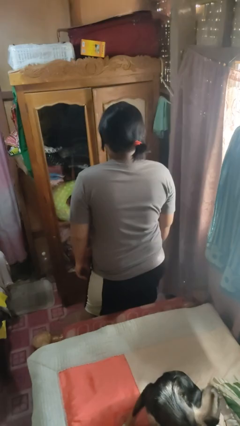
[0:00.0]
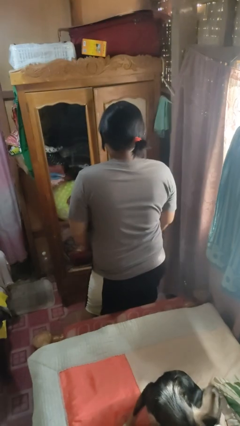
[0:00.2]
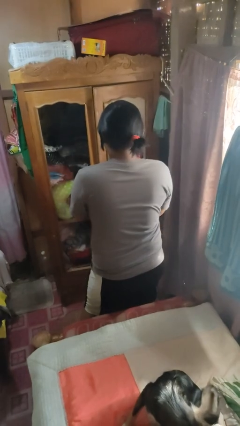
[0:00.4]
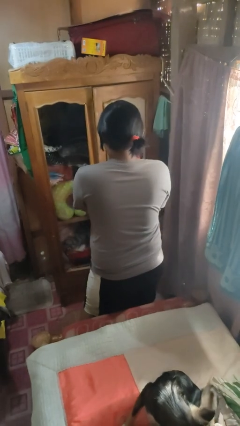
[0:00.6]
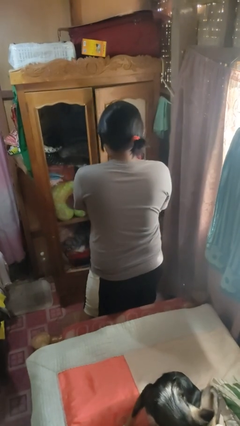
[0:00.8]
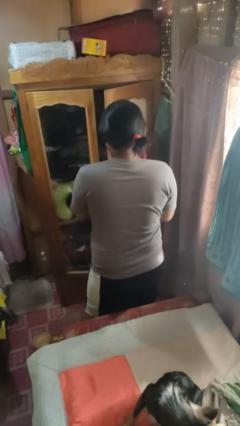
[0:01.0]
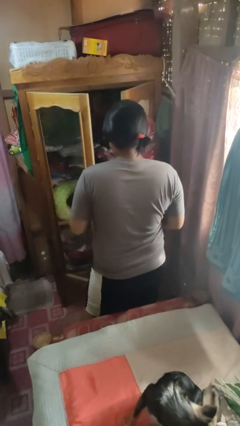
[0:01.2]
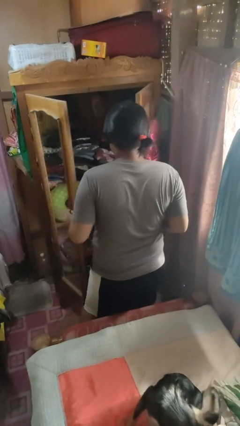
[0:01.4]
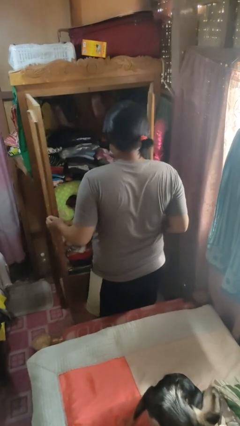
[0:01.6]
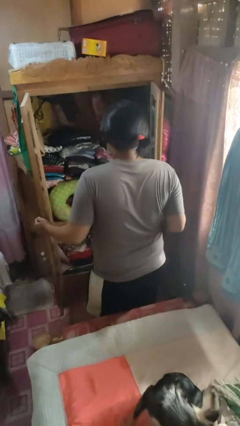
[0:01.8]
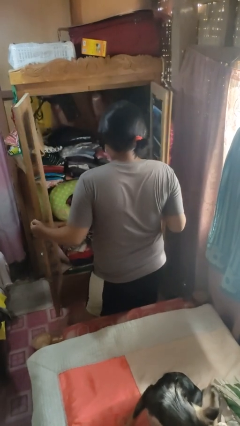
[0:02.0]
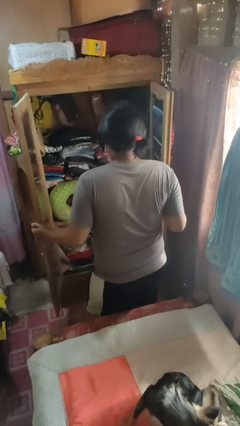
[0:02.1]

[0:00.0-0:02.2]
person opens closet door

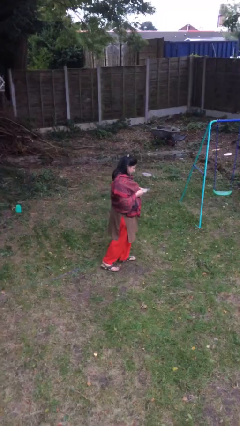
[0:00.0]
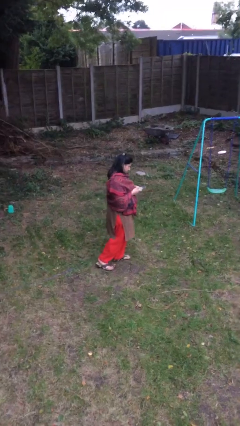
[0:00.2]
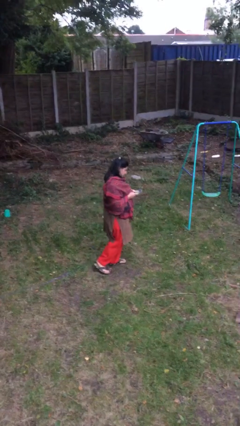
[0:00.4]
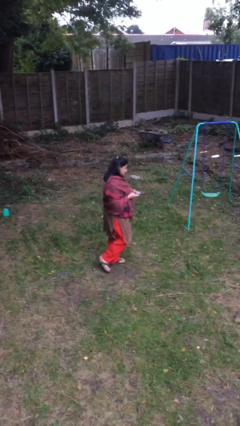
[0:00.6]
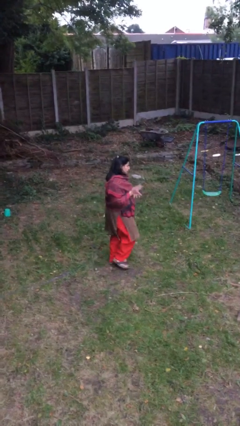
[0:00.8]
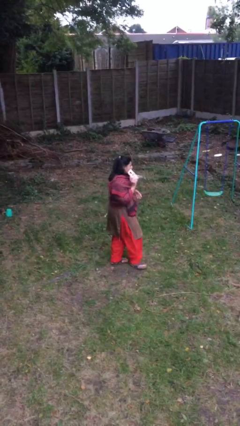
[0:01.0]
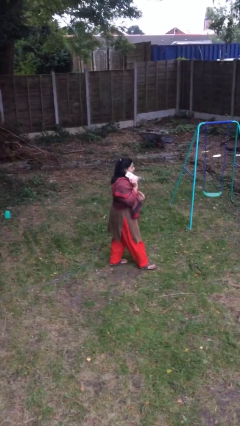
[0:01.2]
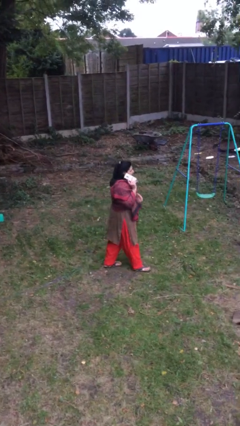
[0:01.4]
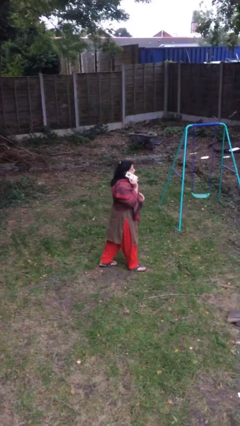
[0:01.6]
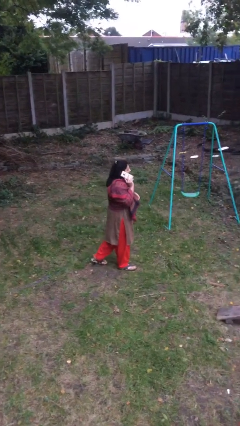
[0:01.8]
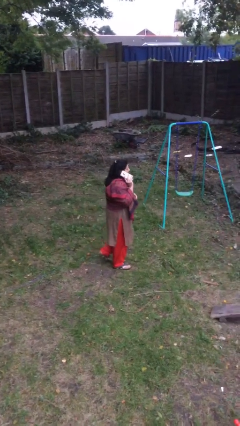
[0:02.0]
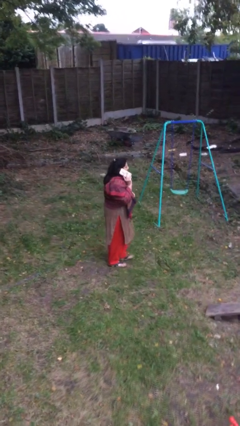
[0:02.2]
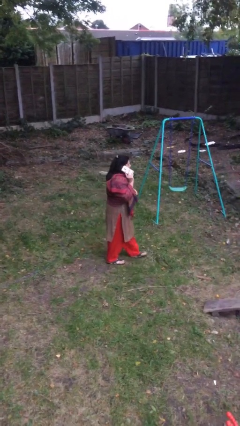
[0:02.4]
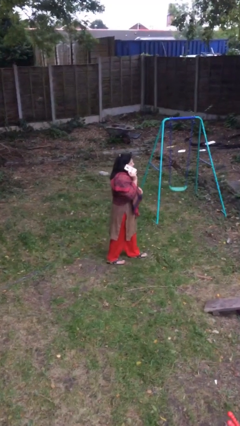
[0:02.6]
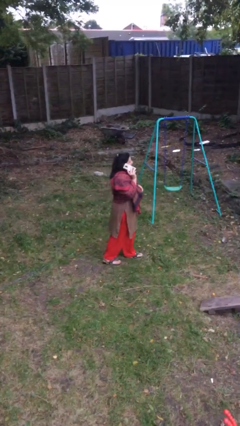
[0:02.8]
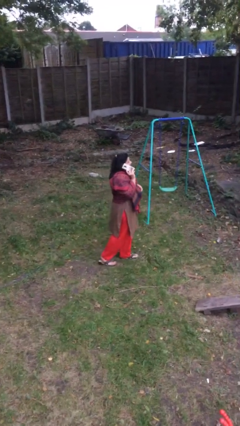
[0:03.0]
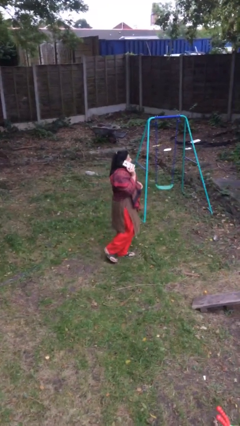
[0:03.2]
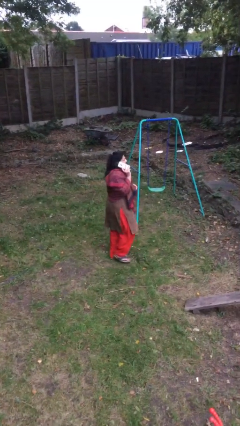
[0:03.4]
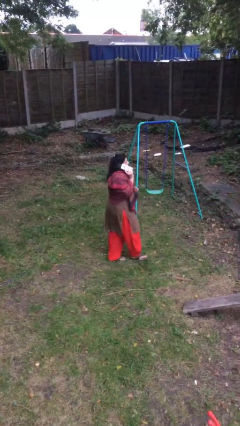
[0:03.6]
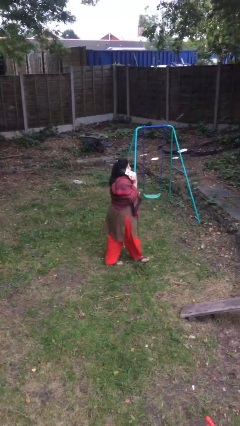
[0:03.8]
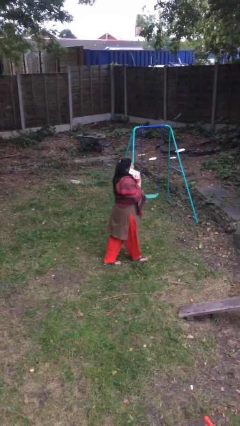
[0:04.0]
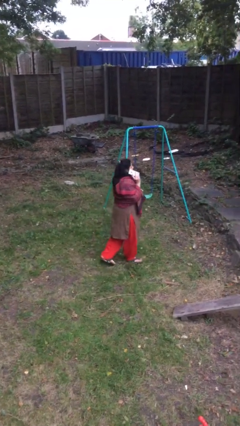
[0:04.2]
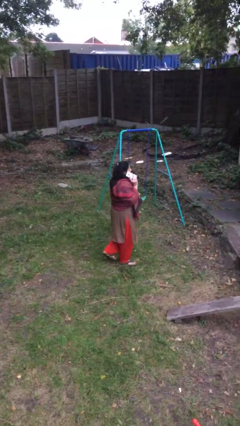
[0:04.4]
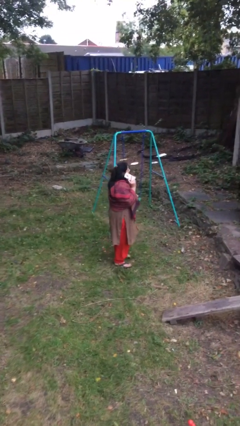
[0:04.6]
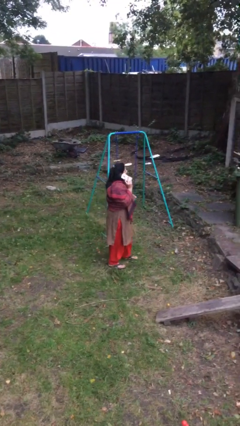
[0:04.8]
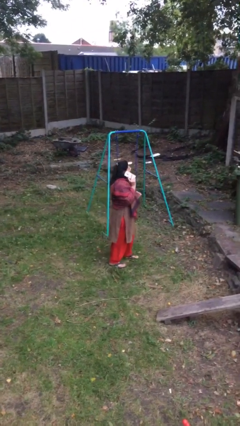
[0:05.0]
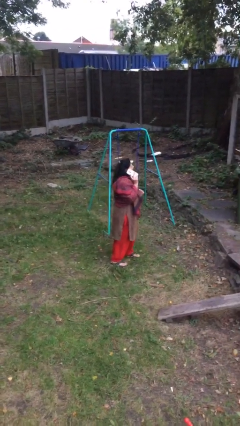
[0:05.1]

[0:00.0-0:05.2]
person talks on phone

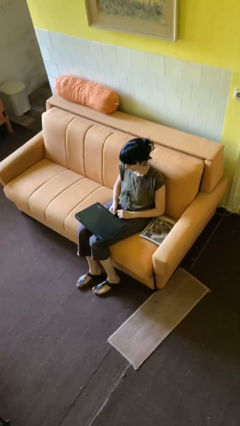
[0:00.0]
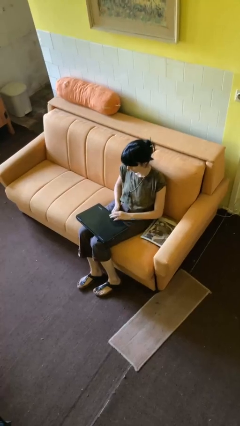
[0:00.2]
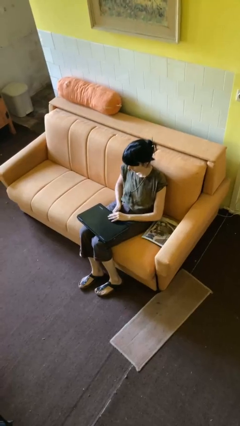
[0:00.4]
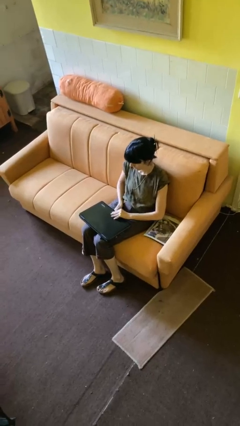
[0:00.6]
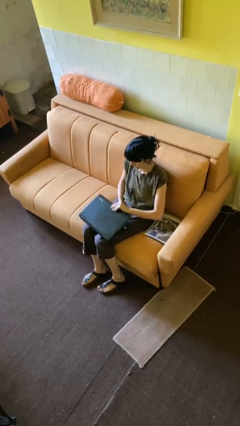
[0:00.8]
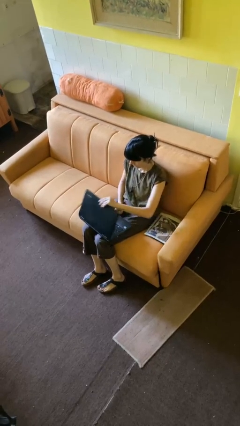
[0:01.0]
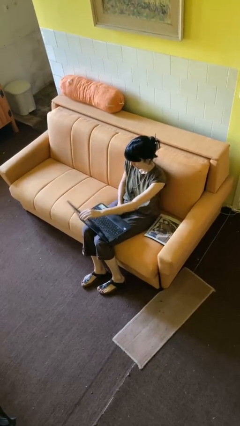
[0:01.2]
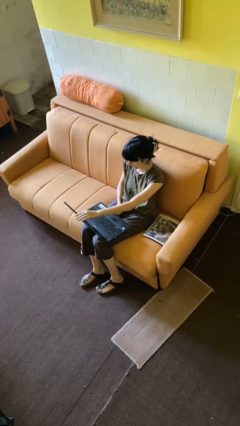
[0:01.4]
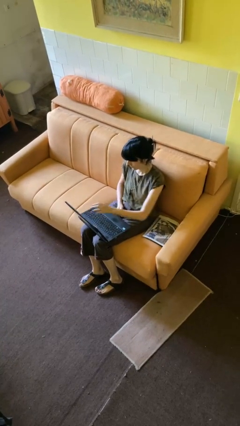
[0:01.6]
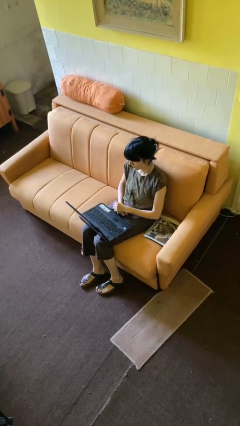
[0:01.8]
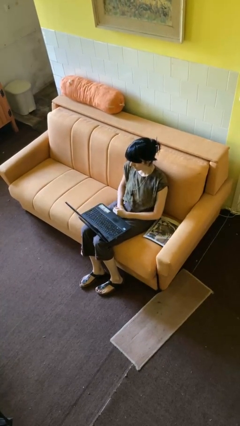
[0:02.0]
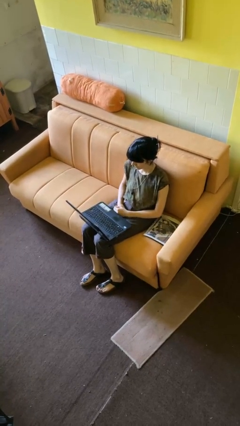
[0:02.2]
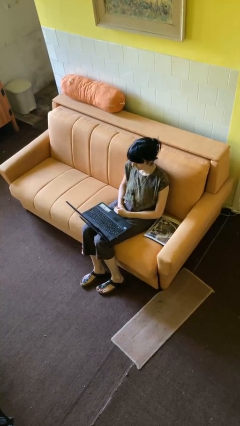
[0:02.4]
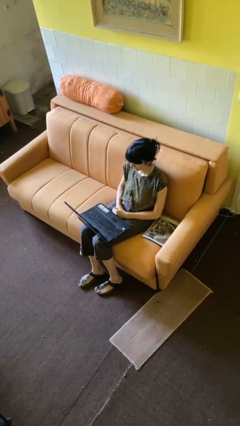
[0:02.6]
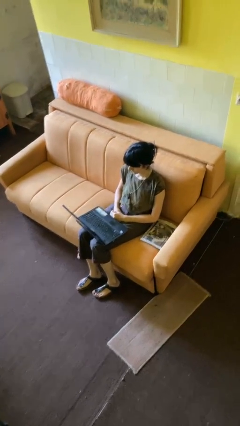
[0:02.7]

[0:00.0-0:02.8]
person opens laptop

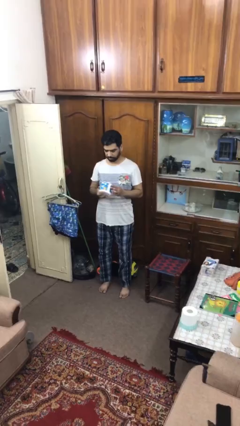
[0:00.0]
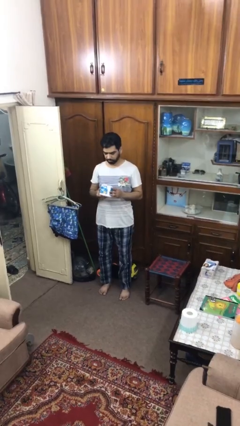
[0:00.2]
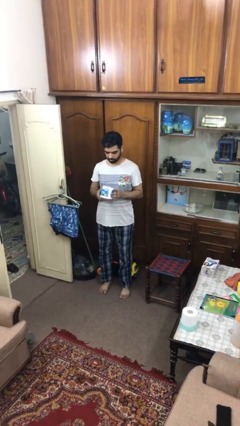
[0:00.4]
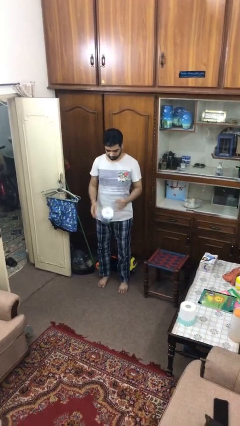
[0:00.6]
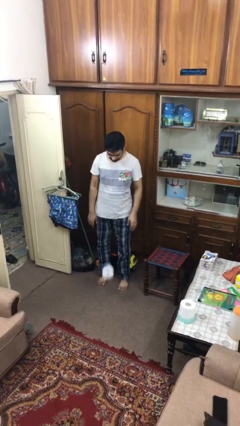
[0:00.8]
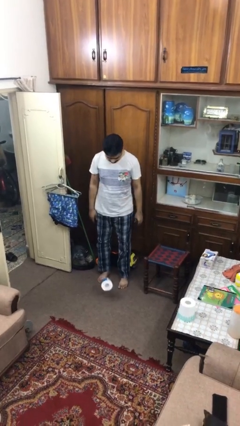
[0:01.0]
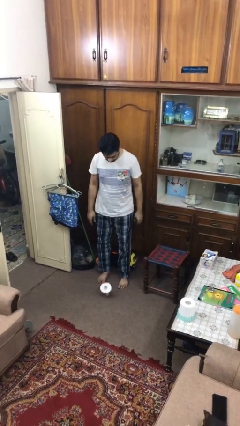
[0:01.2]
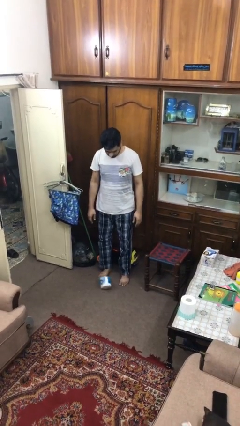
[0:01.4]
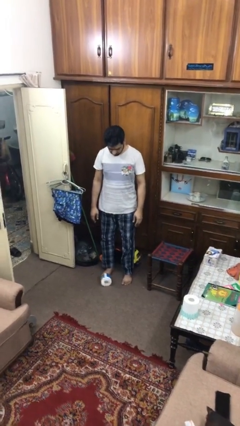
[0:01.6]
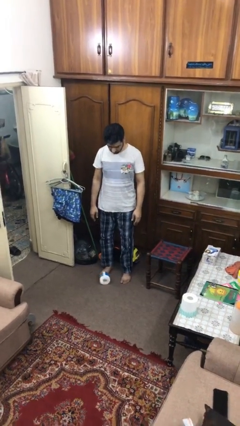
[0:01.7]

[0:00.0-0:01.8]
person drops object

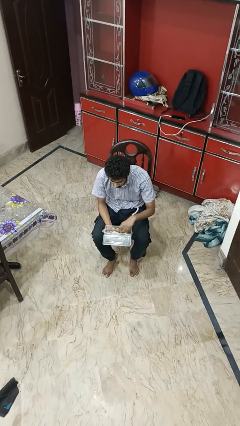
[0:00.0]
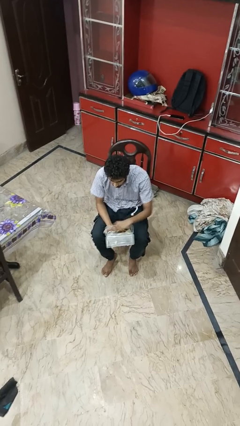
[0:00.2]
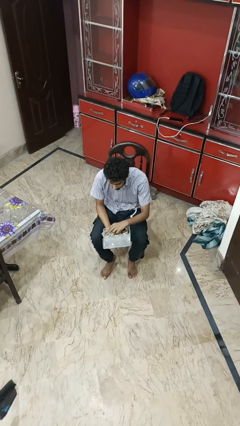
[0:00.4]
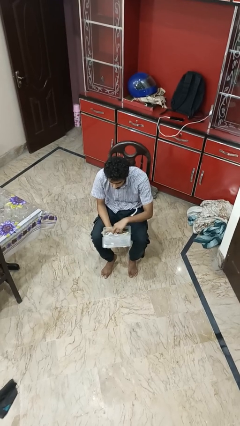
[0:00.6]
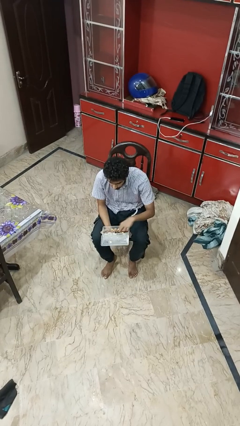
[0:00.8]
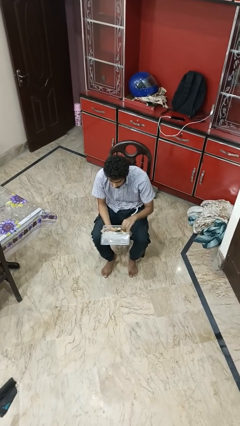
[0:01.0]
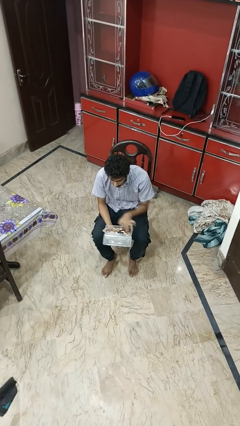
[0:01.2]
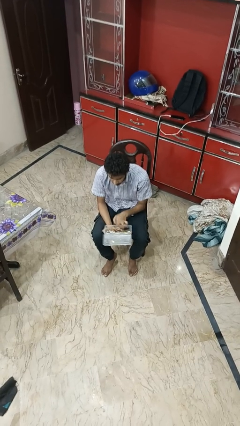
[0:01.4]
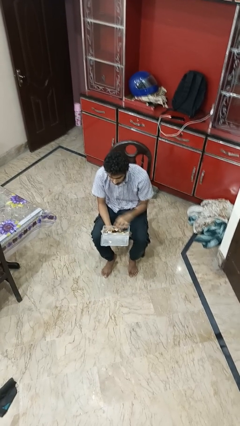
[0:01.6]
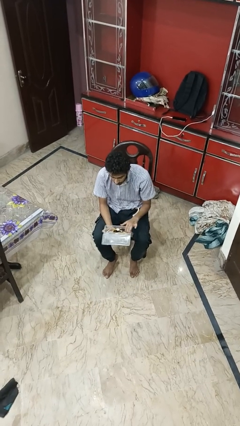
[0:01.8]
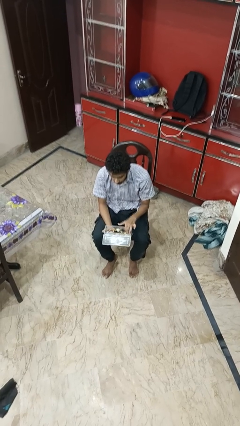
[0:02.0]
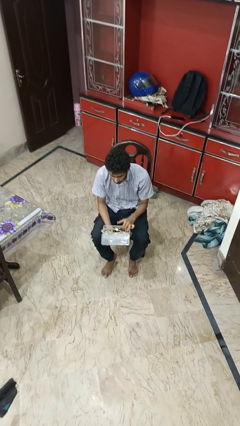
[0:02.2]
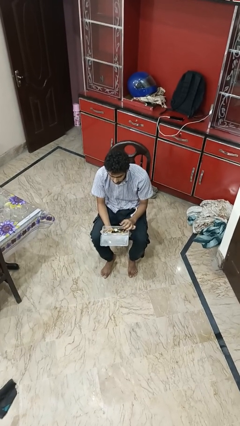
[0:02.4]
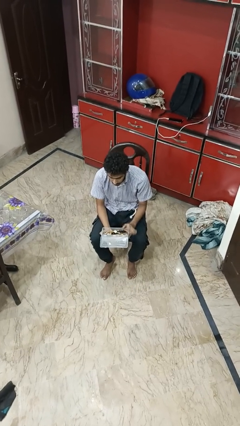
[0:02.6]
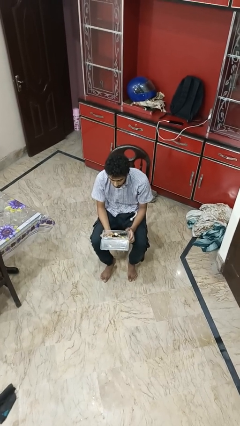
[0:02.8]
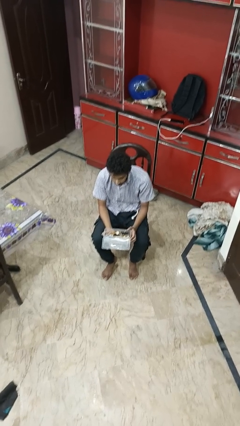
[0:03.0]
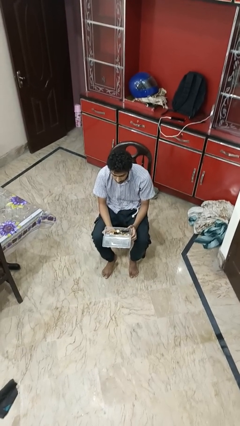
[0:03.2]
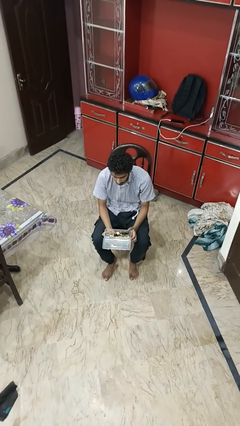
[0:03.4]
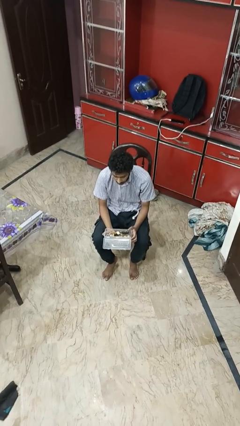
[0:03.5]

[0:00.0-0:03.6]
person searches jewelry box

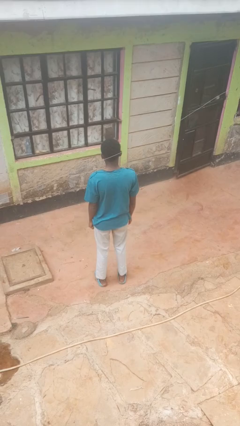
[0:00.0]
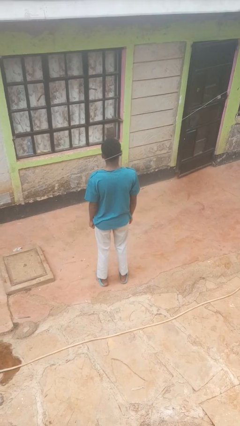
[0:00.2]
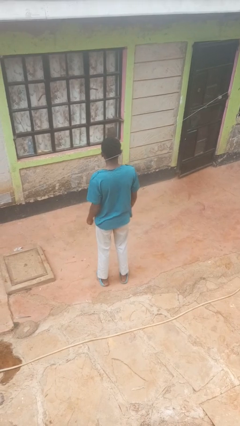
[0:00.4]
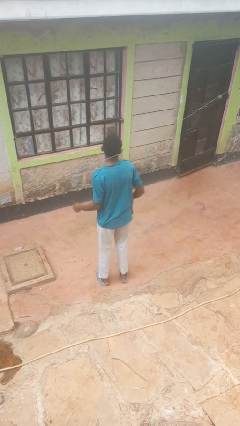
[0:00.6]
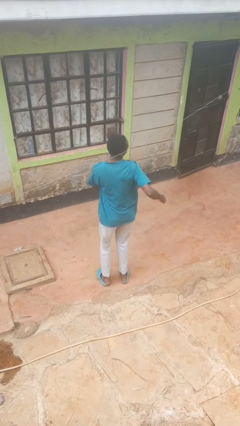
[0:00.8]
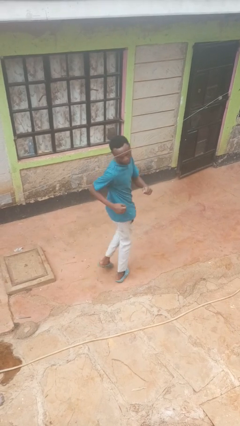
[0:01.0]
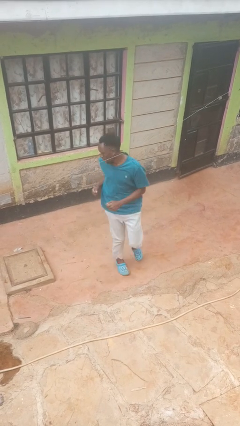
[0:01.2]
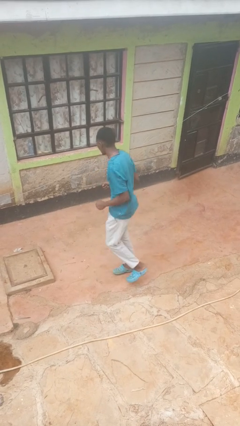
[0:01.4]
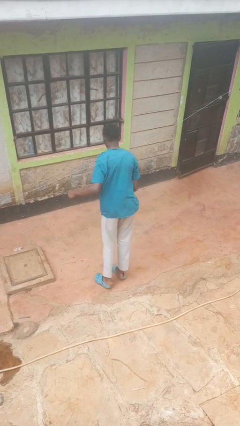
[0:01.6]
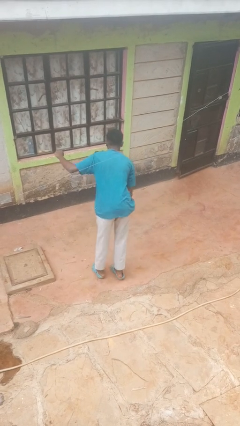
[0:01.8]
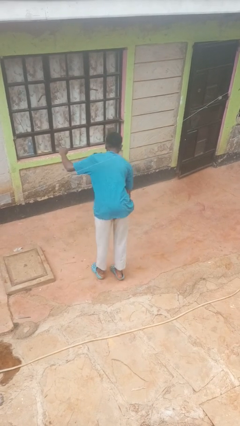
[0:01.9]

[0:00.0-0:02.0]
person twirls
